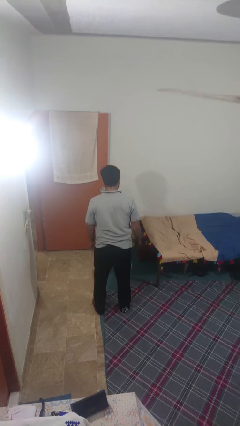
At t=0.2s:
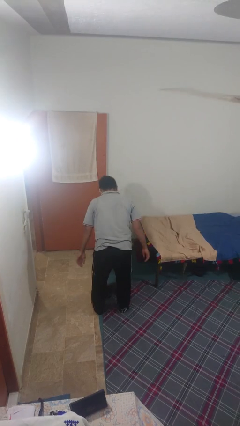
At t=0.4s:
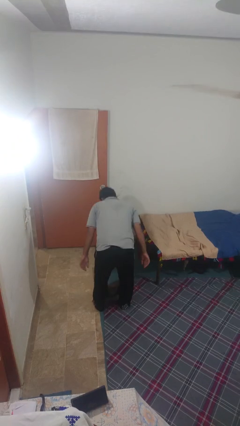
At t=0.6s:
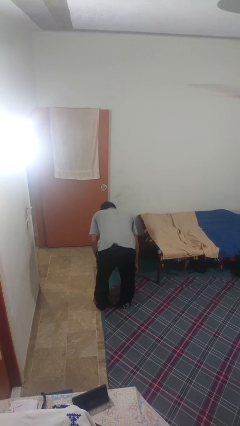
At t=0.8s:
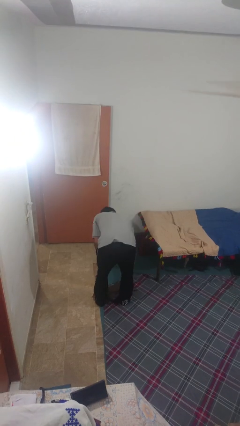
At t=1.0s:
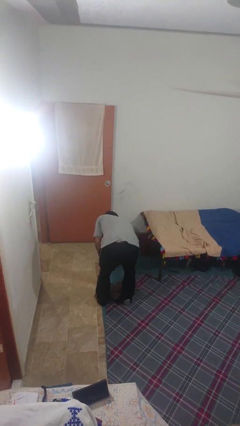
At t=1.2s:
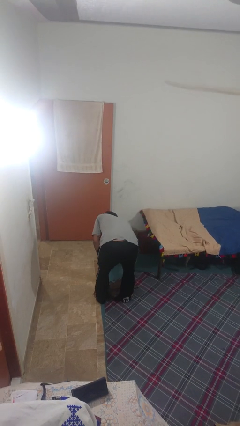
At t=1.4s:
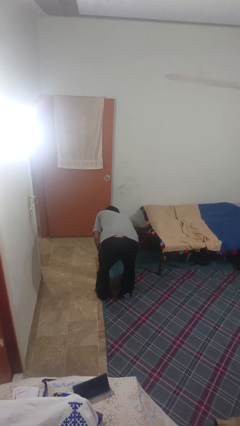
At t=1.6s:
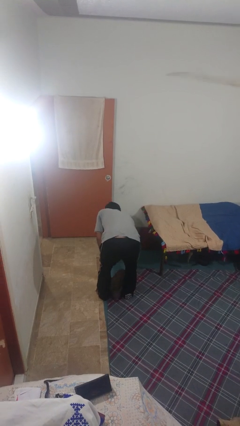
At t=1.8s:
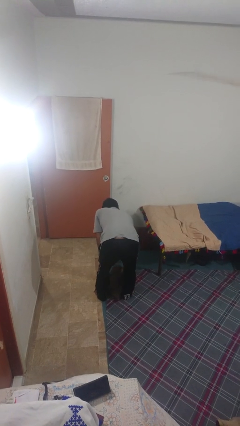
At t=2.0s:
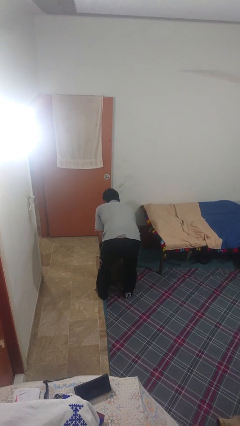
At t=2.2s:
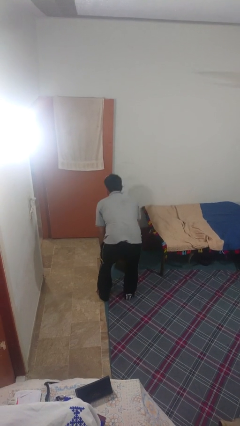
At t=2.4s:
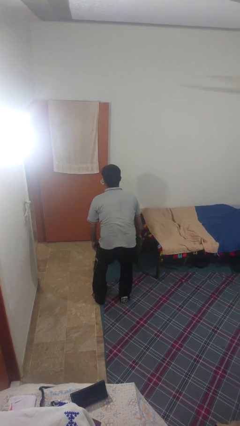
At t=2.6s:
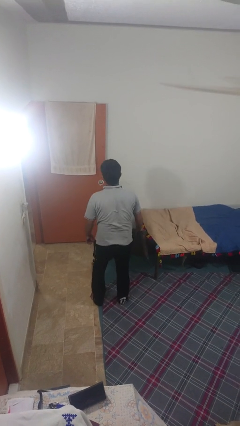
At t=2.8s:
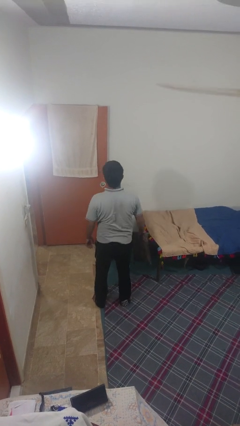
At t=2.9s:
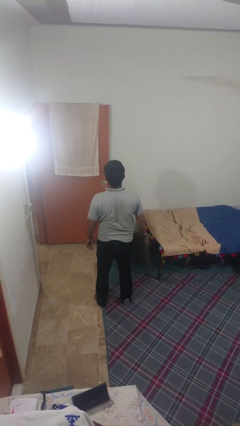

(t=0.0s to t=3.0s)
person picks up object from floor

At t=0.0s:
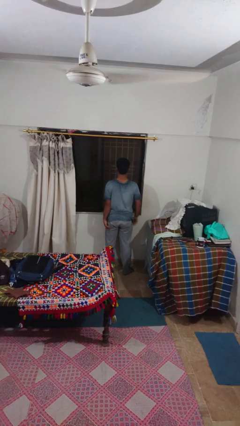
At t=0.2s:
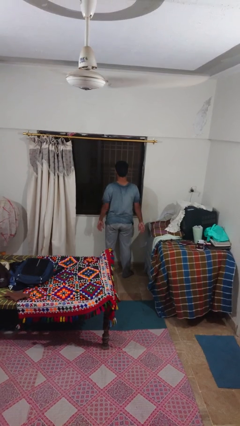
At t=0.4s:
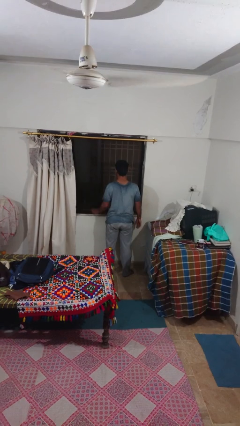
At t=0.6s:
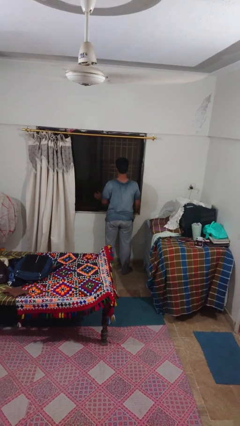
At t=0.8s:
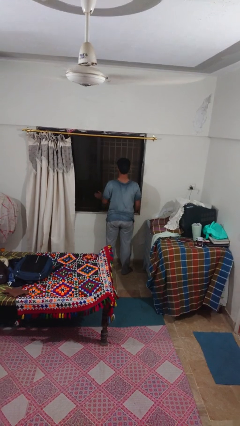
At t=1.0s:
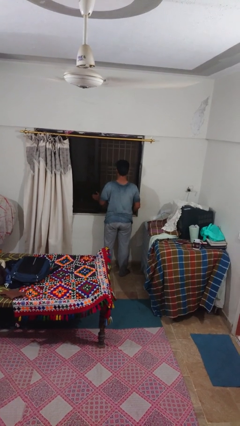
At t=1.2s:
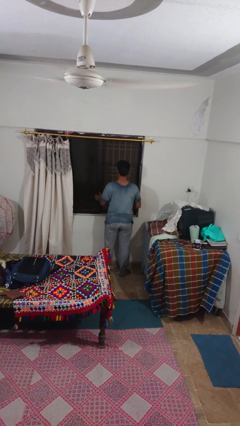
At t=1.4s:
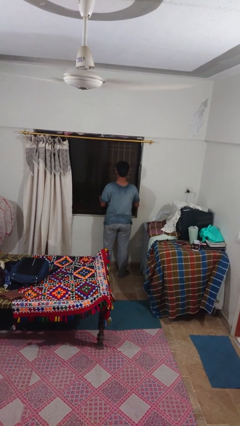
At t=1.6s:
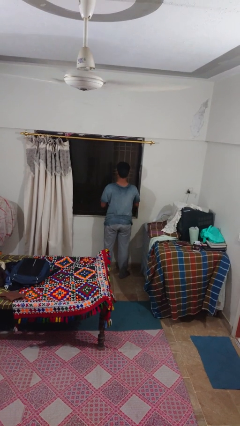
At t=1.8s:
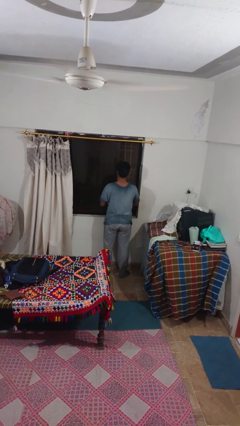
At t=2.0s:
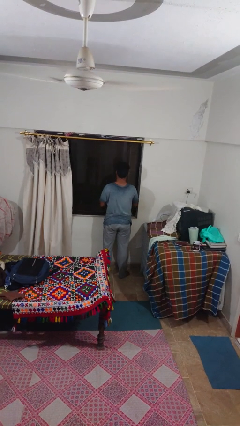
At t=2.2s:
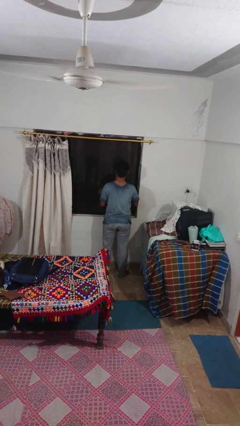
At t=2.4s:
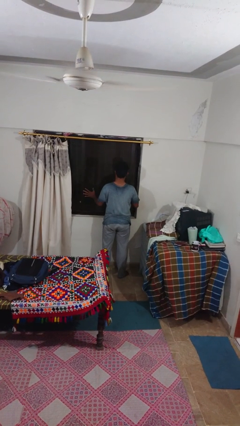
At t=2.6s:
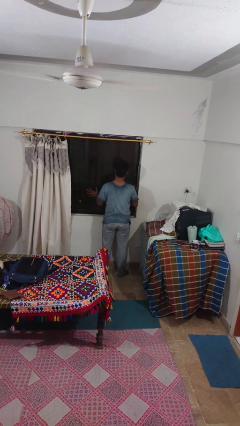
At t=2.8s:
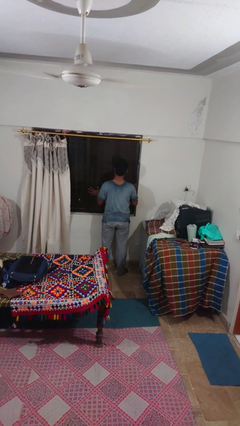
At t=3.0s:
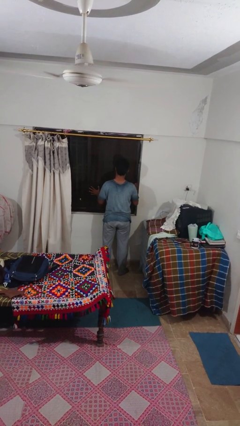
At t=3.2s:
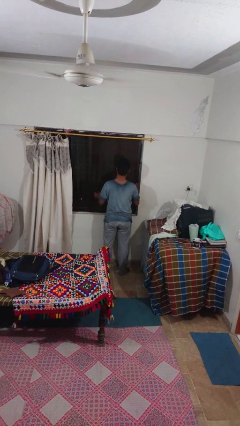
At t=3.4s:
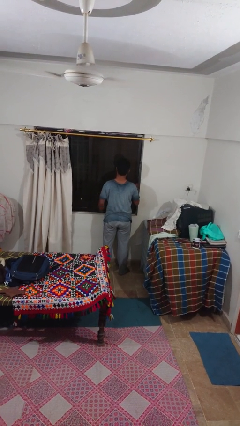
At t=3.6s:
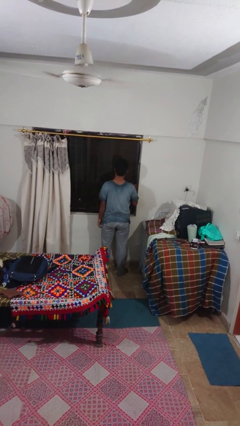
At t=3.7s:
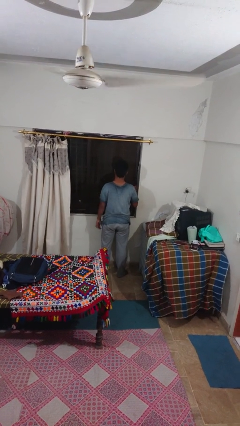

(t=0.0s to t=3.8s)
person closes sliding door

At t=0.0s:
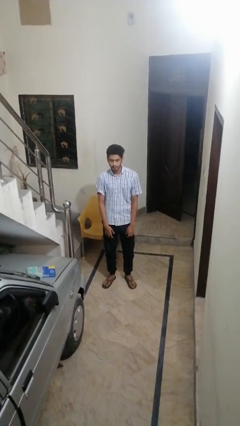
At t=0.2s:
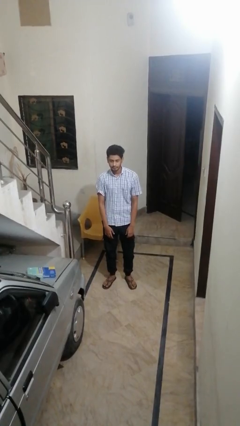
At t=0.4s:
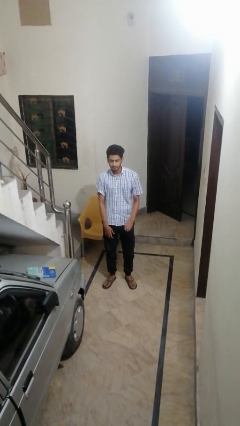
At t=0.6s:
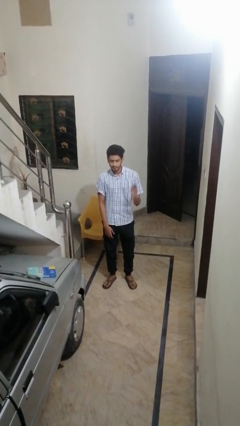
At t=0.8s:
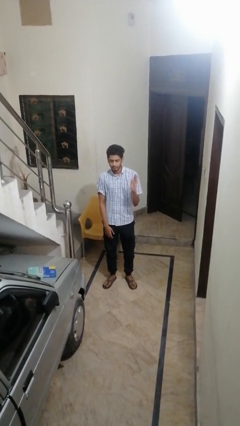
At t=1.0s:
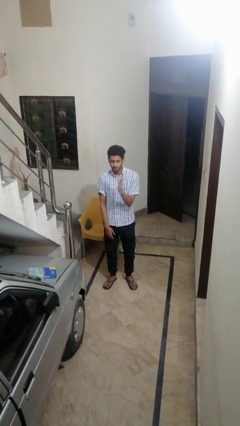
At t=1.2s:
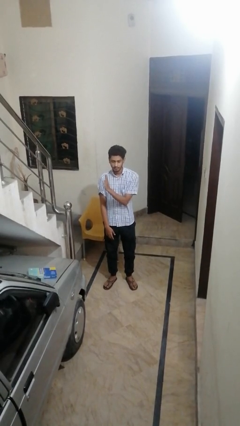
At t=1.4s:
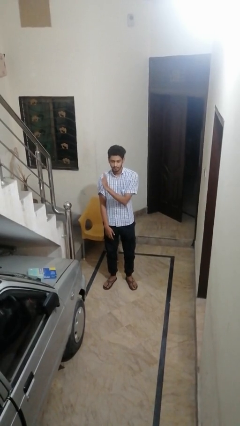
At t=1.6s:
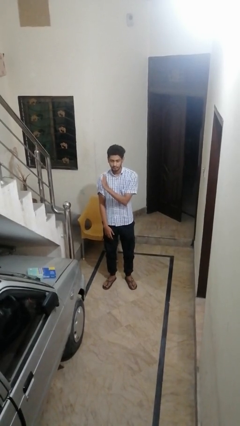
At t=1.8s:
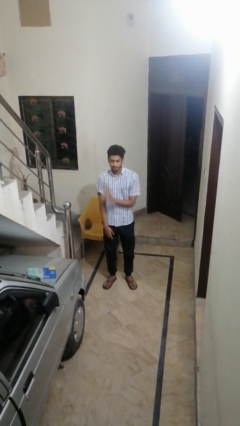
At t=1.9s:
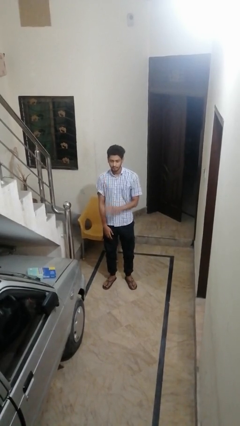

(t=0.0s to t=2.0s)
person gestures swipe right

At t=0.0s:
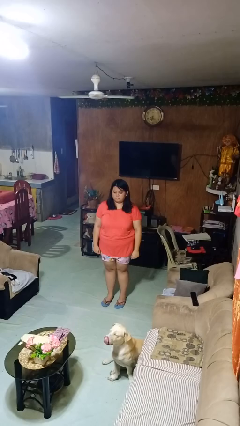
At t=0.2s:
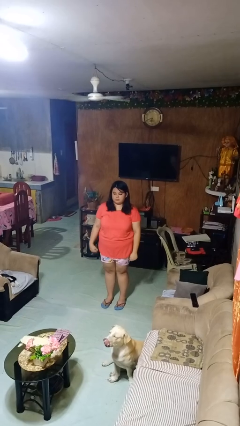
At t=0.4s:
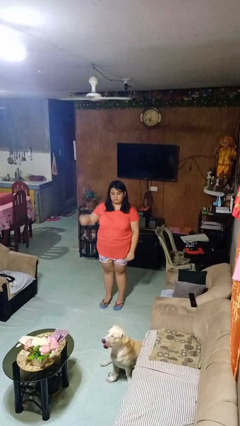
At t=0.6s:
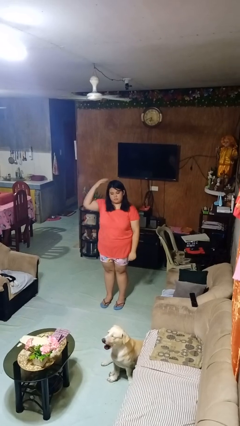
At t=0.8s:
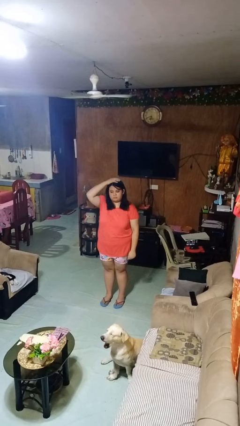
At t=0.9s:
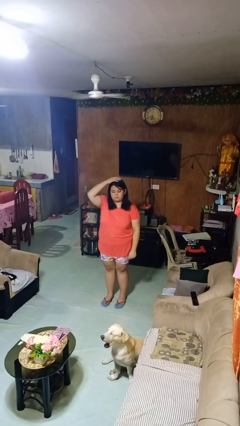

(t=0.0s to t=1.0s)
person pats head

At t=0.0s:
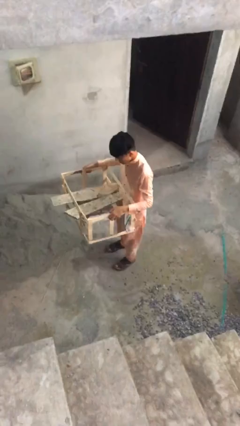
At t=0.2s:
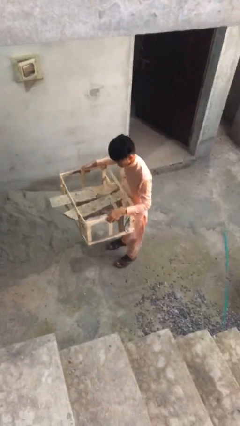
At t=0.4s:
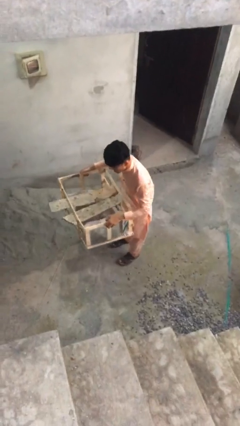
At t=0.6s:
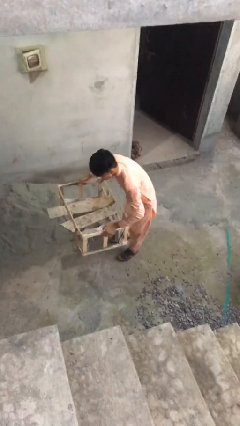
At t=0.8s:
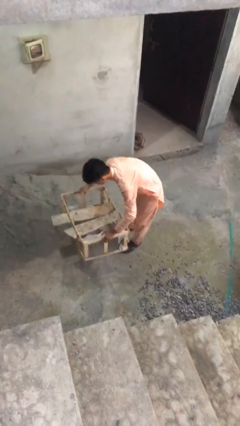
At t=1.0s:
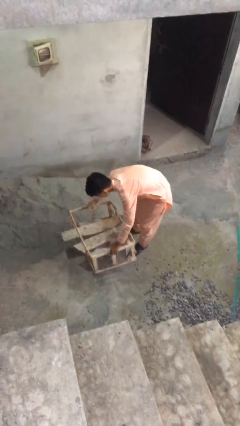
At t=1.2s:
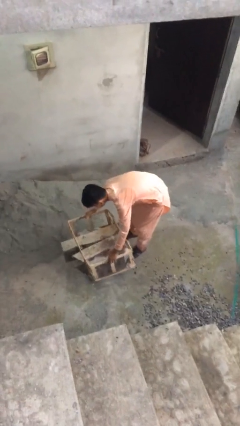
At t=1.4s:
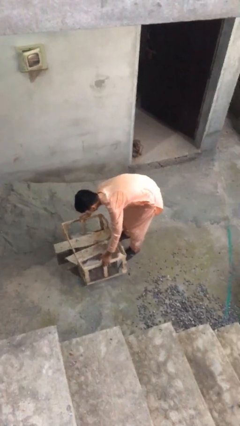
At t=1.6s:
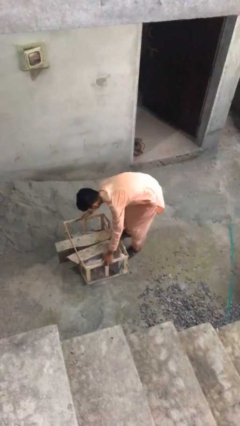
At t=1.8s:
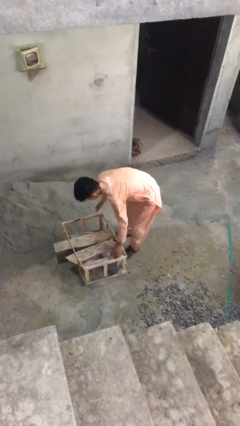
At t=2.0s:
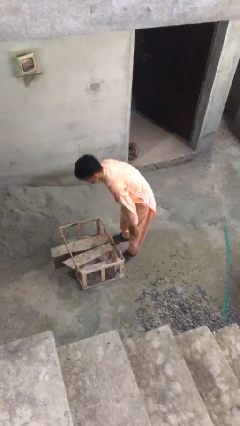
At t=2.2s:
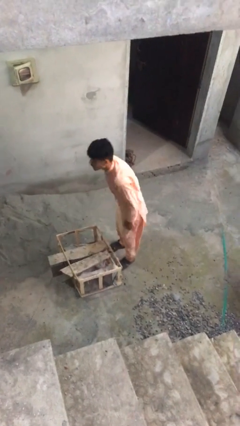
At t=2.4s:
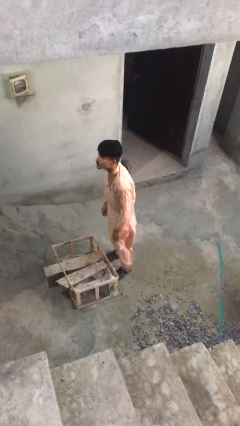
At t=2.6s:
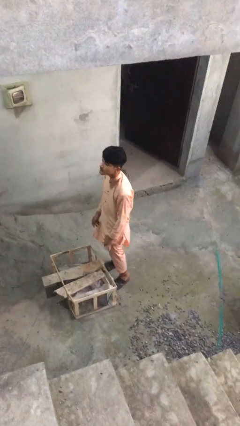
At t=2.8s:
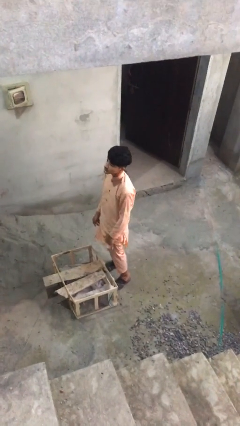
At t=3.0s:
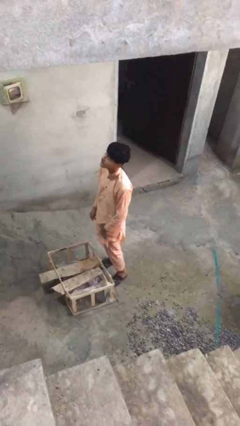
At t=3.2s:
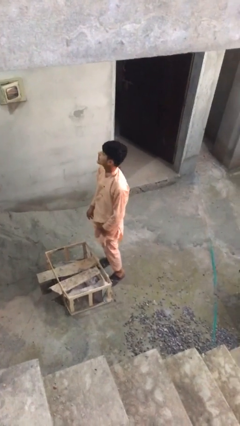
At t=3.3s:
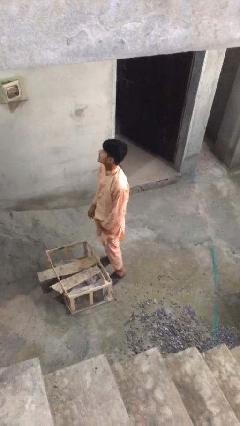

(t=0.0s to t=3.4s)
person puts down object on floor

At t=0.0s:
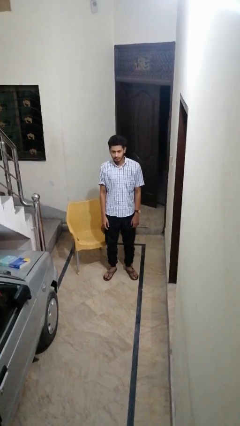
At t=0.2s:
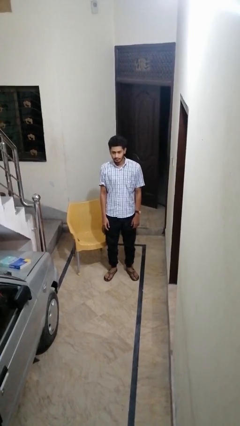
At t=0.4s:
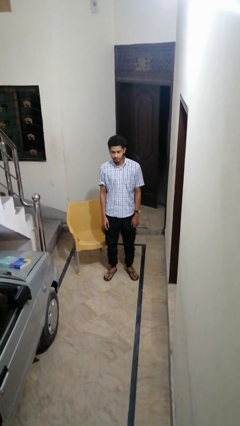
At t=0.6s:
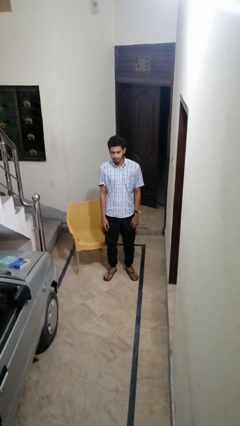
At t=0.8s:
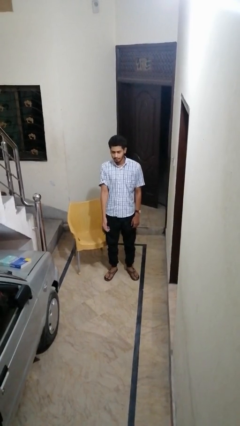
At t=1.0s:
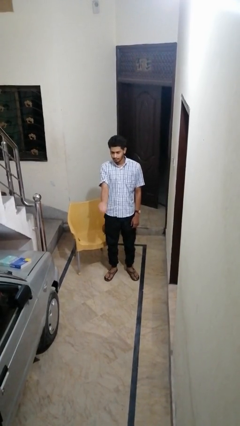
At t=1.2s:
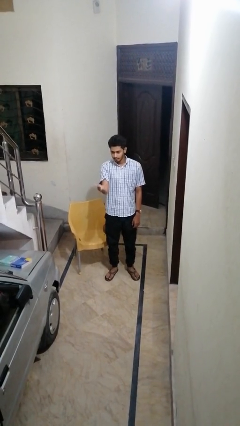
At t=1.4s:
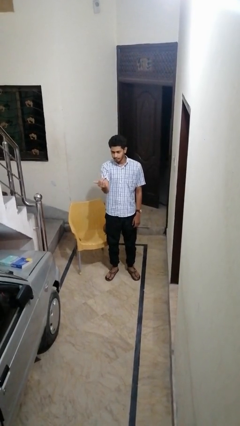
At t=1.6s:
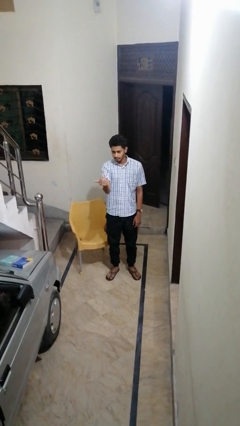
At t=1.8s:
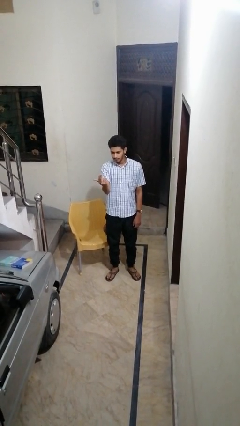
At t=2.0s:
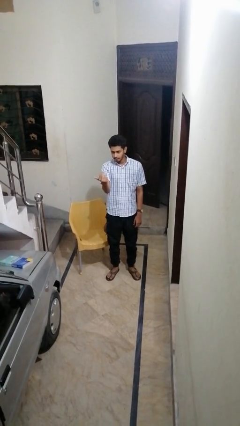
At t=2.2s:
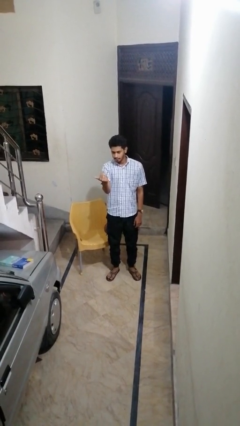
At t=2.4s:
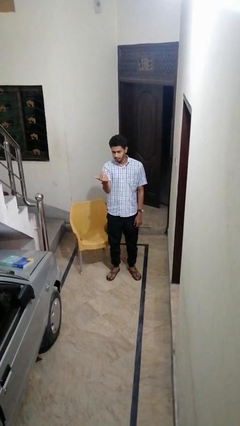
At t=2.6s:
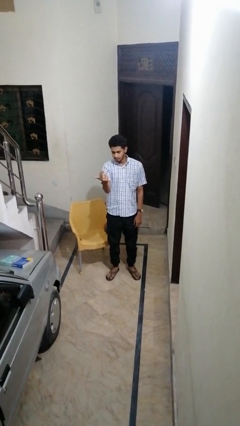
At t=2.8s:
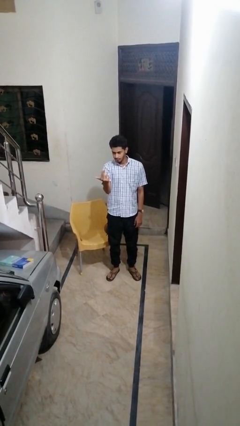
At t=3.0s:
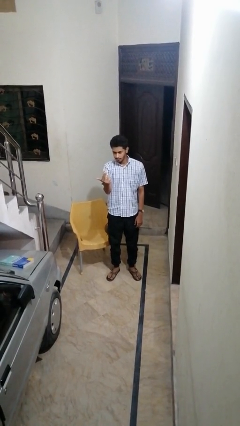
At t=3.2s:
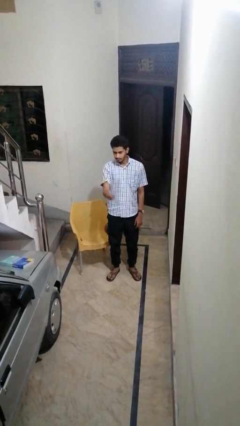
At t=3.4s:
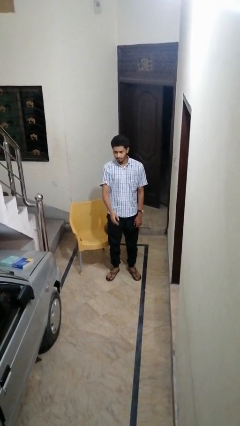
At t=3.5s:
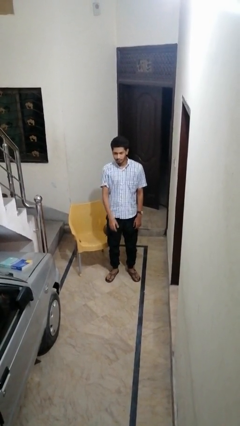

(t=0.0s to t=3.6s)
person gestures come here
